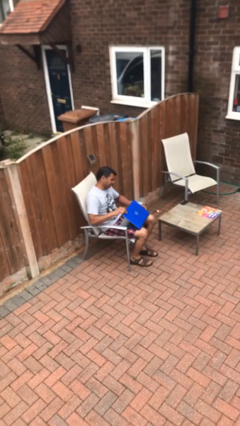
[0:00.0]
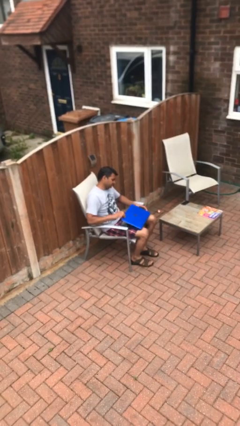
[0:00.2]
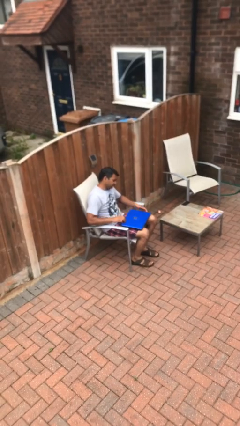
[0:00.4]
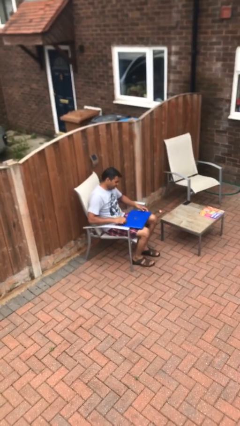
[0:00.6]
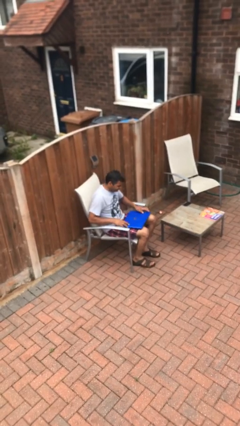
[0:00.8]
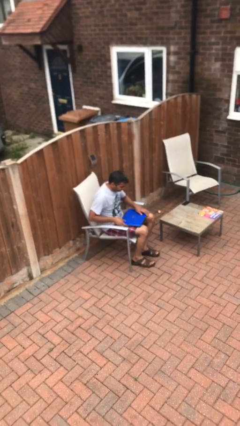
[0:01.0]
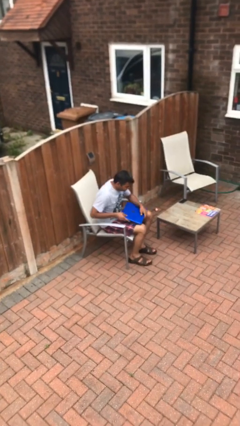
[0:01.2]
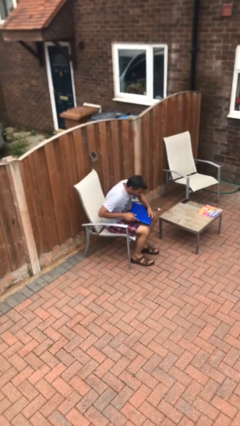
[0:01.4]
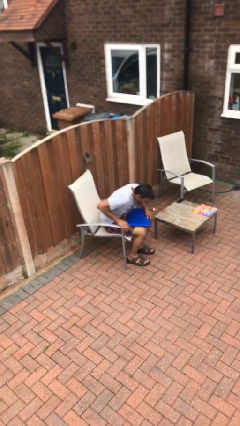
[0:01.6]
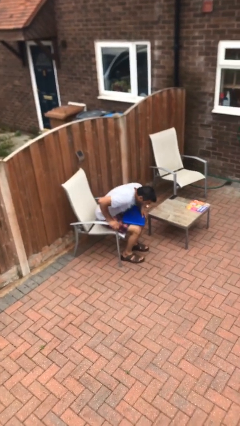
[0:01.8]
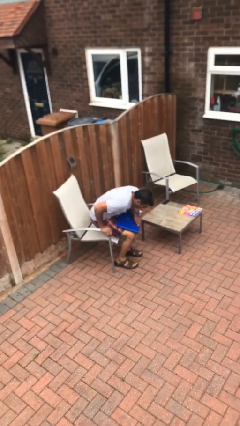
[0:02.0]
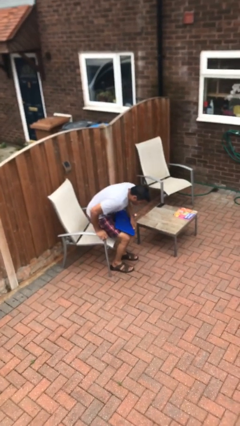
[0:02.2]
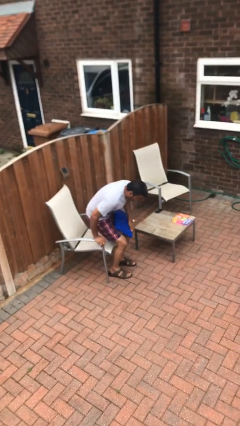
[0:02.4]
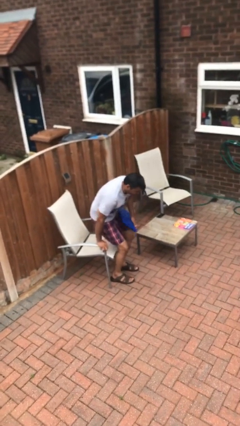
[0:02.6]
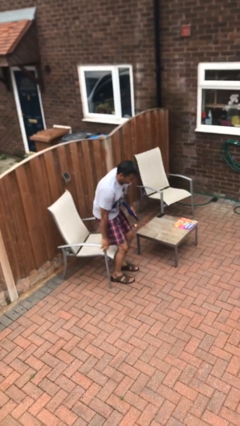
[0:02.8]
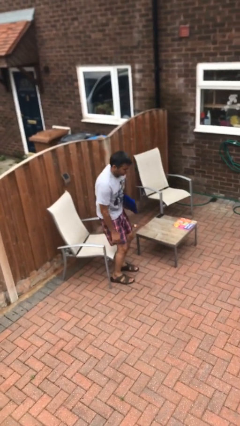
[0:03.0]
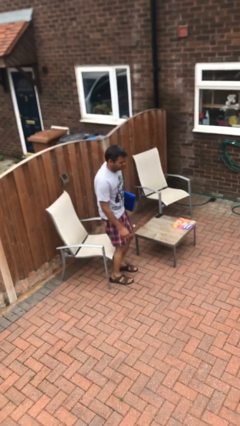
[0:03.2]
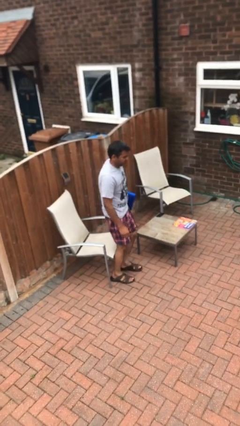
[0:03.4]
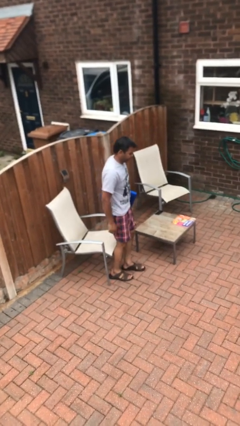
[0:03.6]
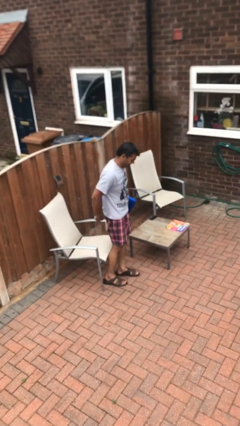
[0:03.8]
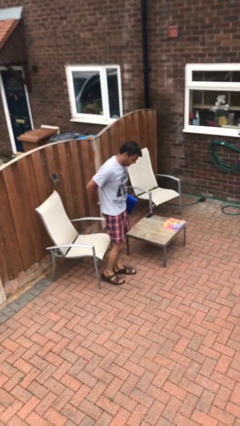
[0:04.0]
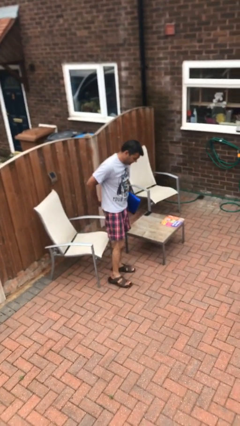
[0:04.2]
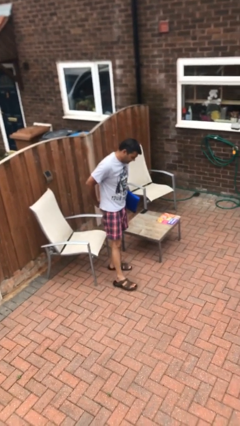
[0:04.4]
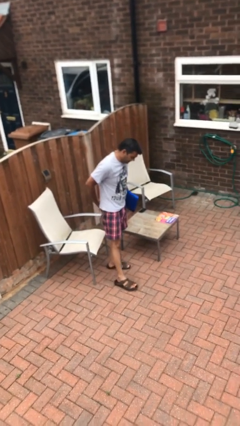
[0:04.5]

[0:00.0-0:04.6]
person stands up

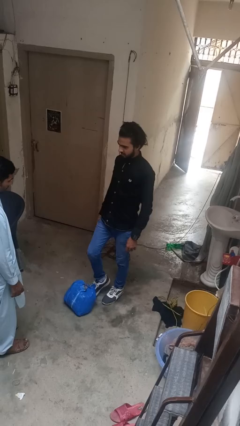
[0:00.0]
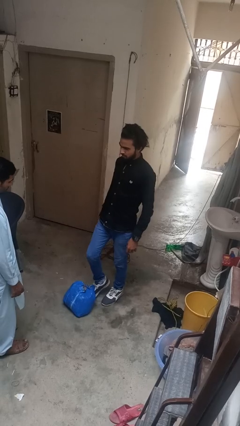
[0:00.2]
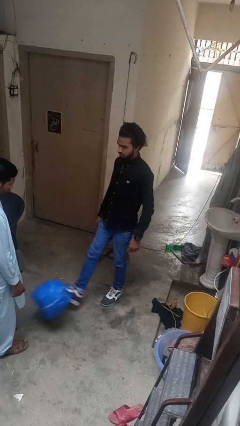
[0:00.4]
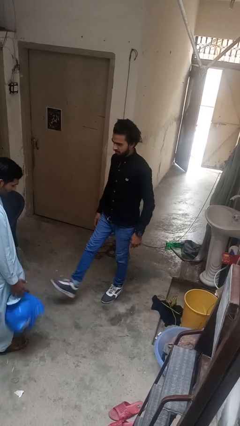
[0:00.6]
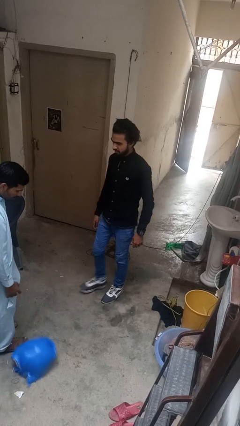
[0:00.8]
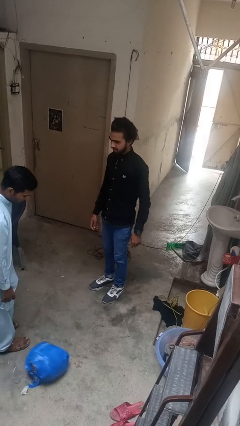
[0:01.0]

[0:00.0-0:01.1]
person kicks object to person

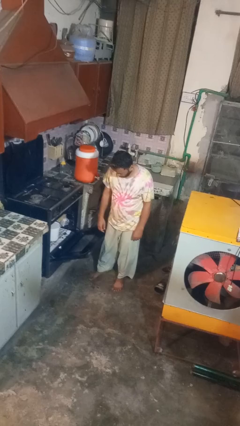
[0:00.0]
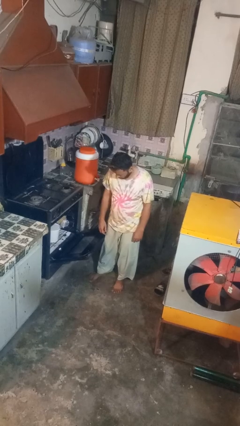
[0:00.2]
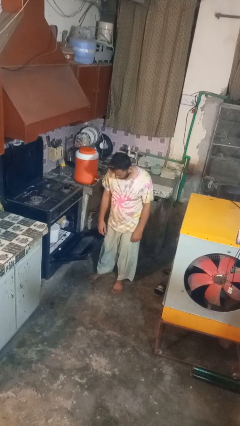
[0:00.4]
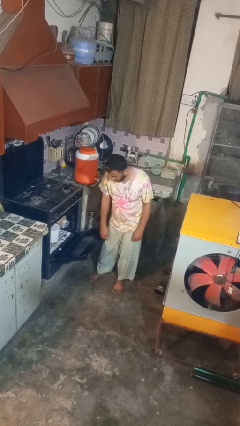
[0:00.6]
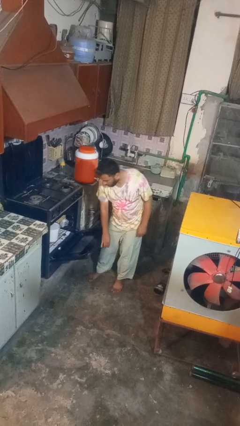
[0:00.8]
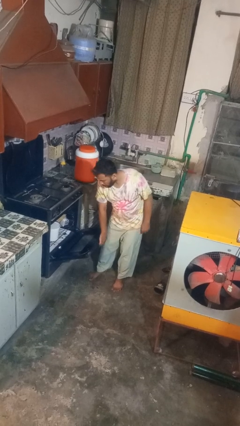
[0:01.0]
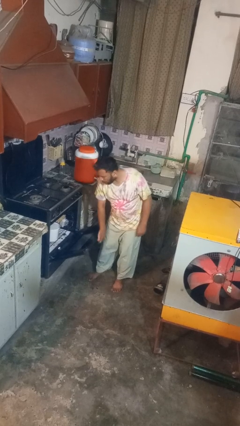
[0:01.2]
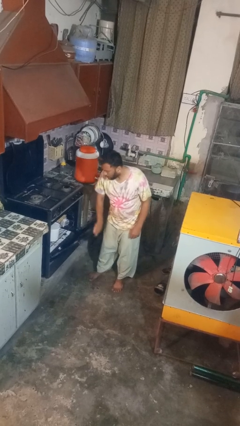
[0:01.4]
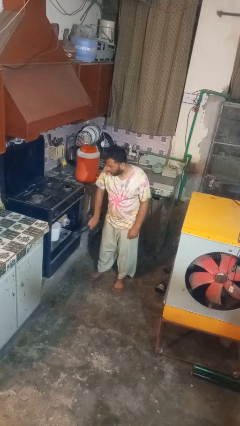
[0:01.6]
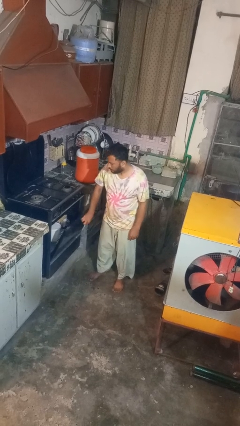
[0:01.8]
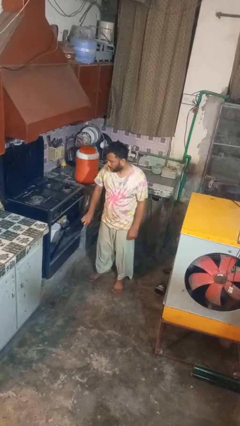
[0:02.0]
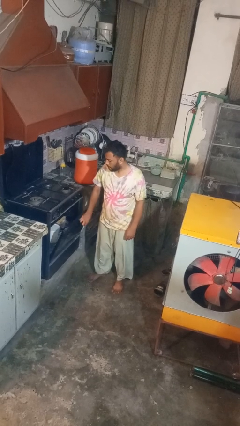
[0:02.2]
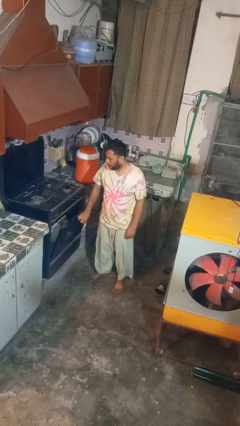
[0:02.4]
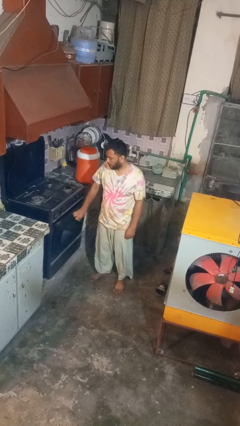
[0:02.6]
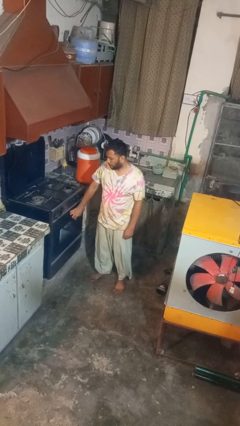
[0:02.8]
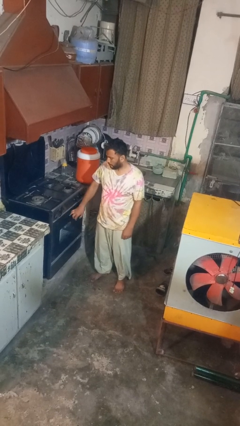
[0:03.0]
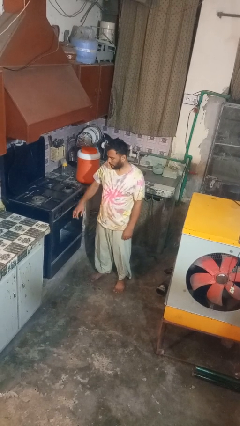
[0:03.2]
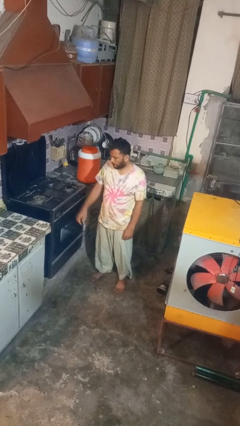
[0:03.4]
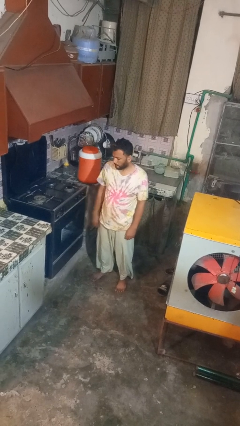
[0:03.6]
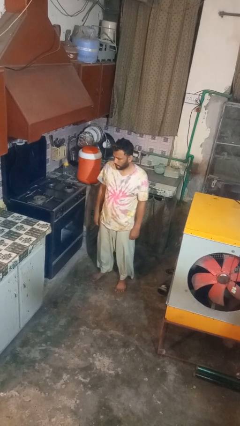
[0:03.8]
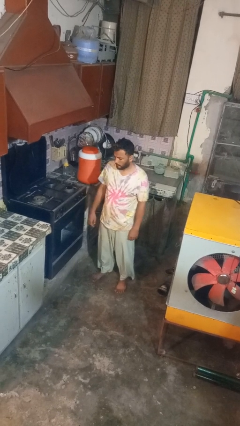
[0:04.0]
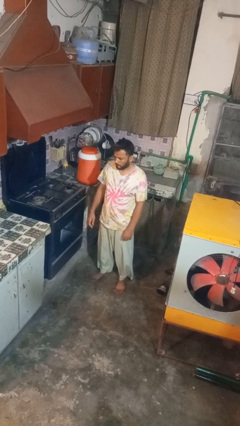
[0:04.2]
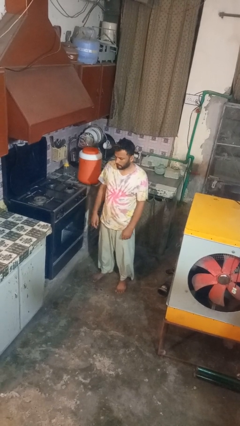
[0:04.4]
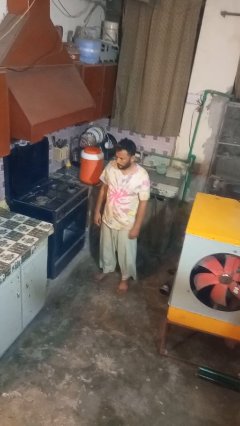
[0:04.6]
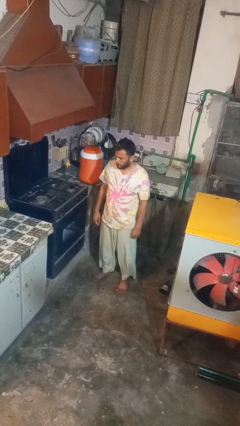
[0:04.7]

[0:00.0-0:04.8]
person closes oven door

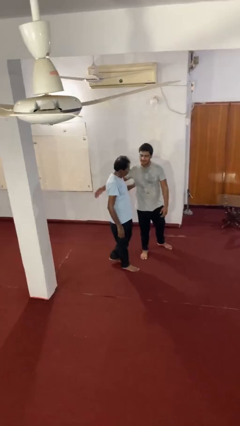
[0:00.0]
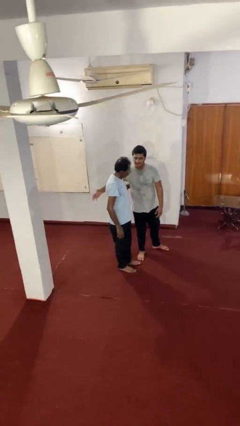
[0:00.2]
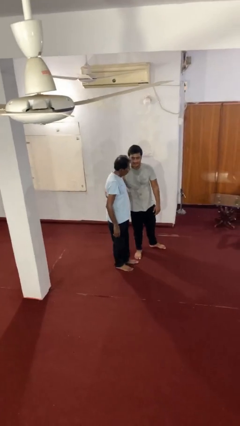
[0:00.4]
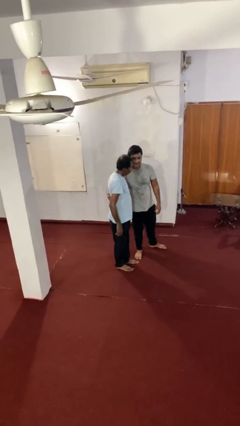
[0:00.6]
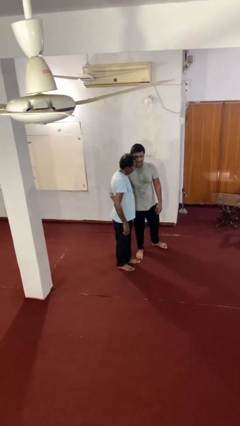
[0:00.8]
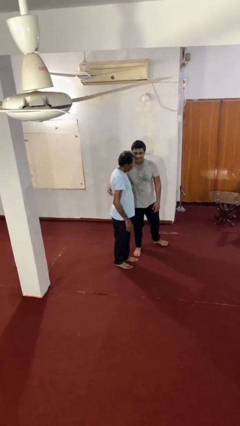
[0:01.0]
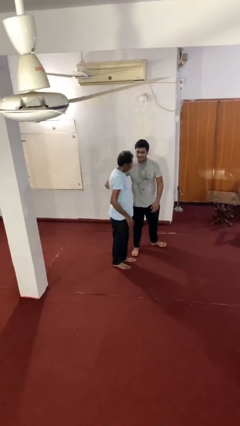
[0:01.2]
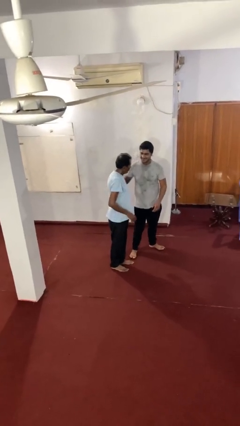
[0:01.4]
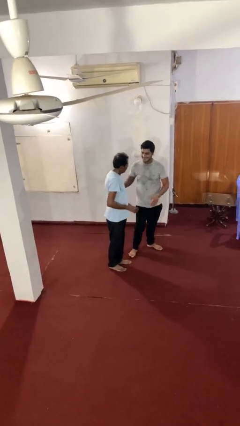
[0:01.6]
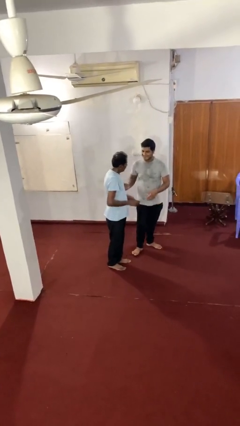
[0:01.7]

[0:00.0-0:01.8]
person embraces person

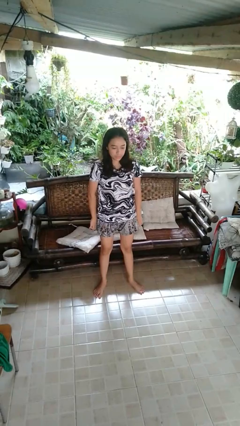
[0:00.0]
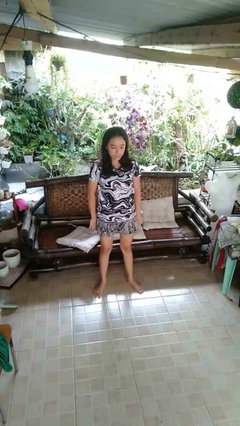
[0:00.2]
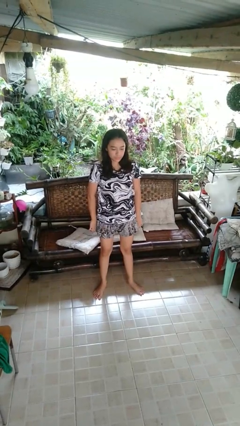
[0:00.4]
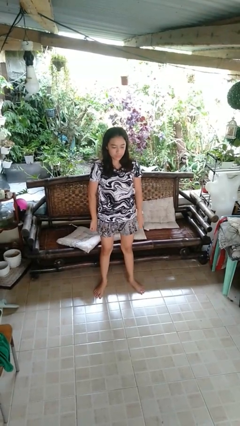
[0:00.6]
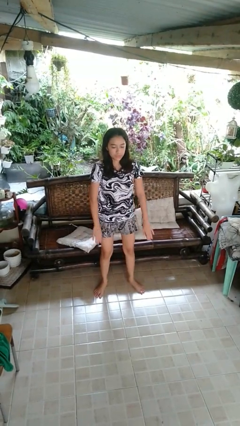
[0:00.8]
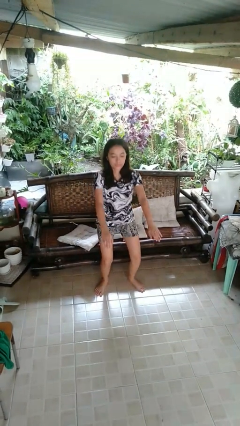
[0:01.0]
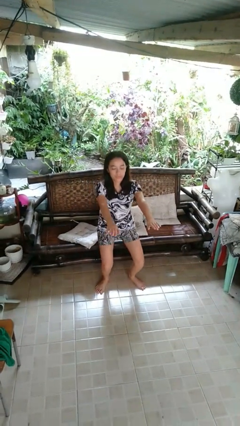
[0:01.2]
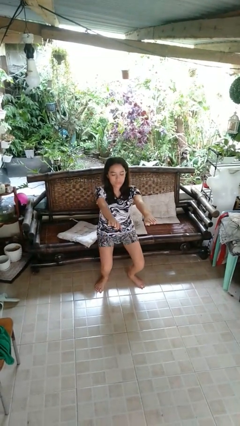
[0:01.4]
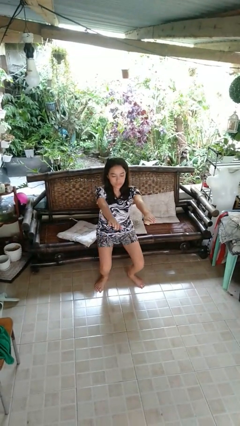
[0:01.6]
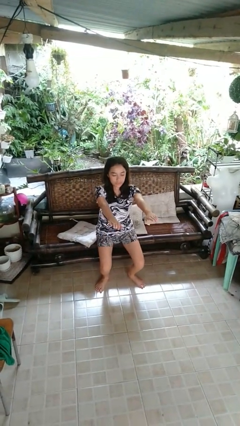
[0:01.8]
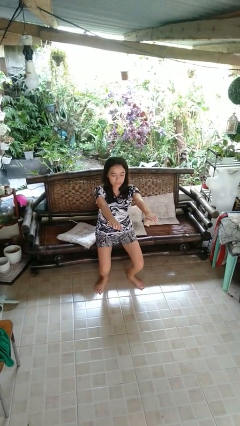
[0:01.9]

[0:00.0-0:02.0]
person squats

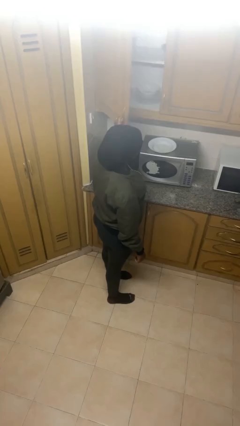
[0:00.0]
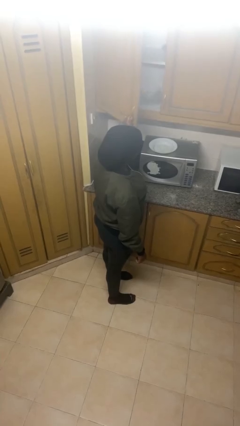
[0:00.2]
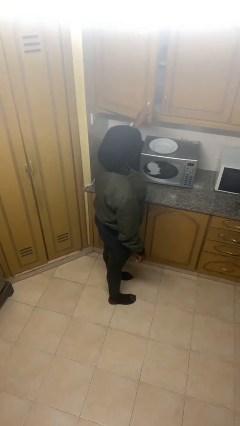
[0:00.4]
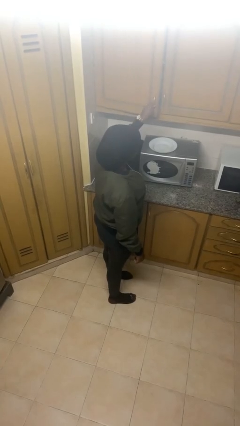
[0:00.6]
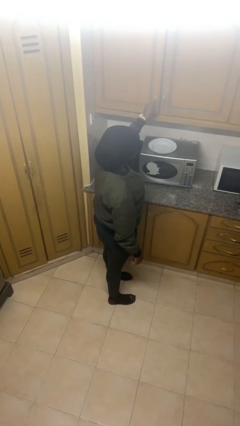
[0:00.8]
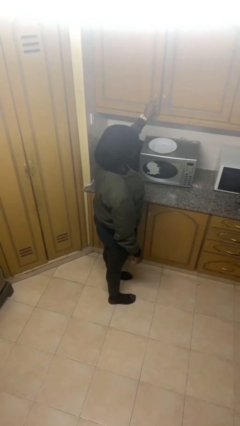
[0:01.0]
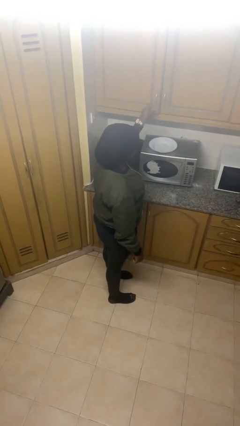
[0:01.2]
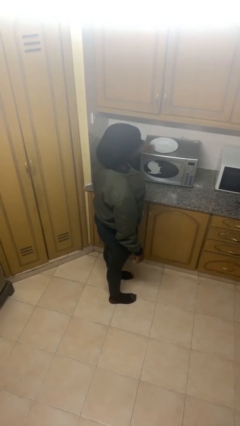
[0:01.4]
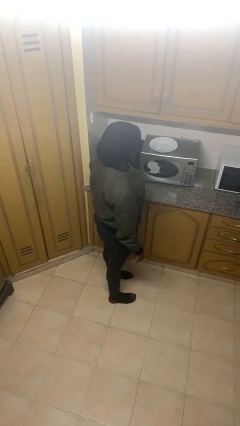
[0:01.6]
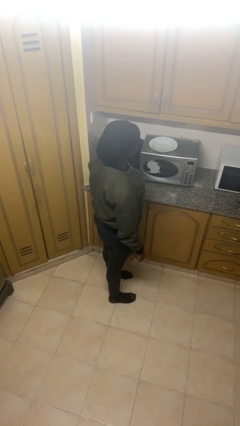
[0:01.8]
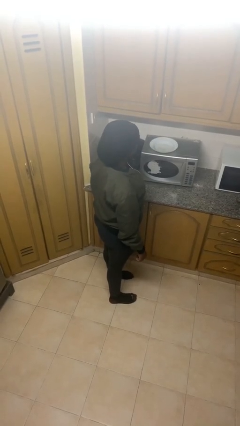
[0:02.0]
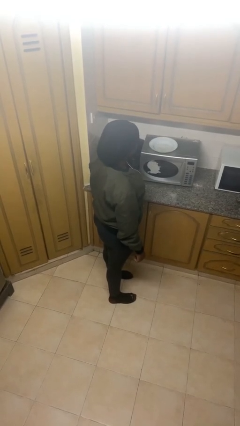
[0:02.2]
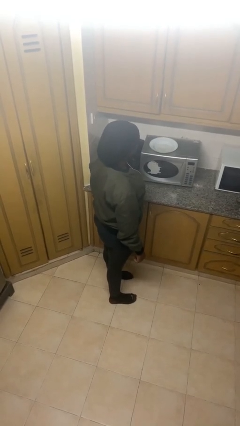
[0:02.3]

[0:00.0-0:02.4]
person closes cabinet

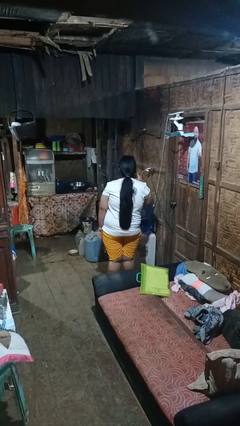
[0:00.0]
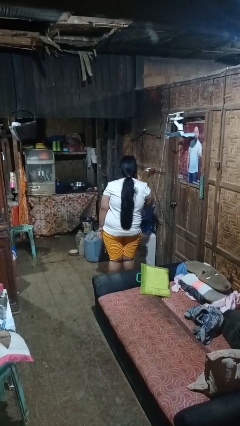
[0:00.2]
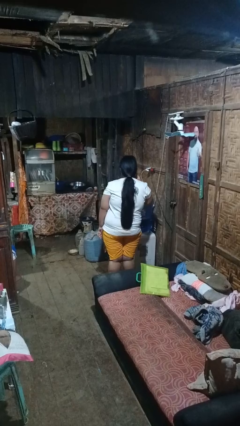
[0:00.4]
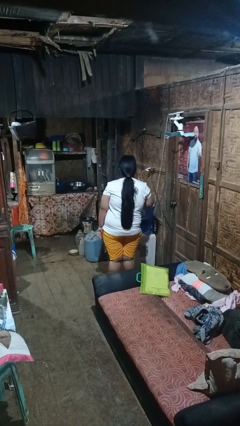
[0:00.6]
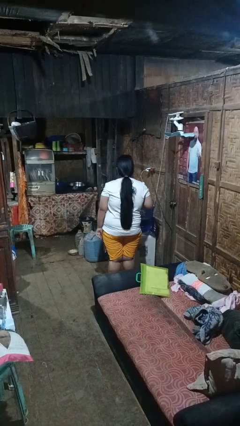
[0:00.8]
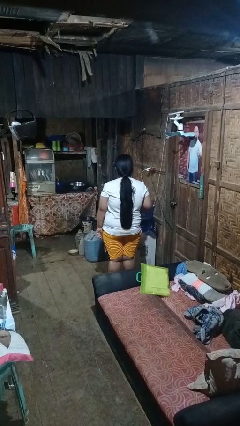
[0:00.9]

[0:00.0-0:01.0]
person gestures listen closely
